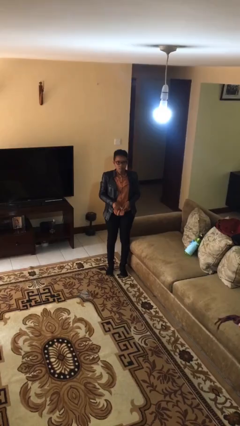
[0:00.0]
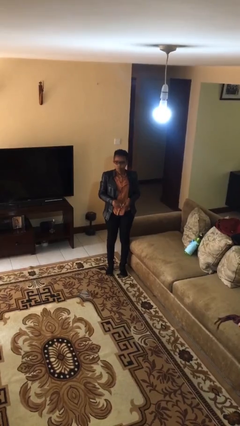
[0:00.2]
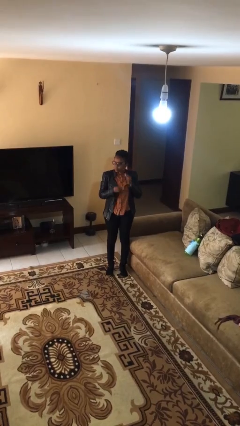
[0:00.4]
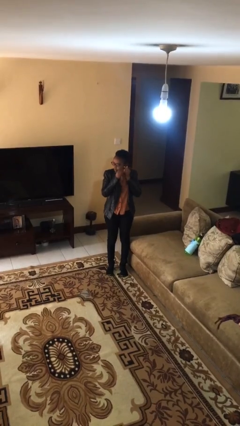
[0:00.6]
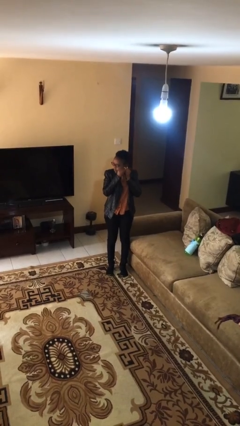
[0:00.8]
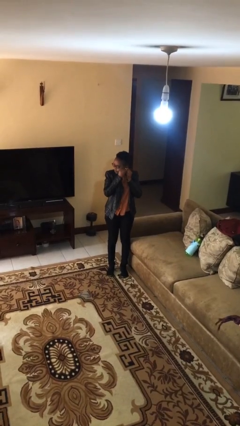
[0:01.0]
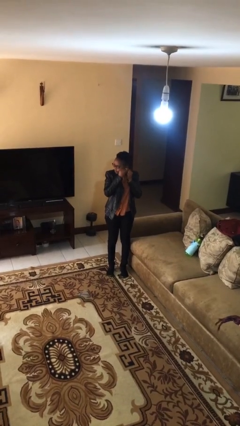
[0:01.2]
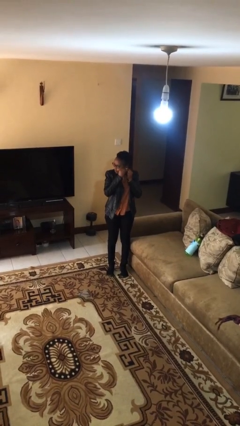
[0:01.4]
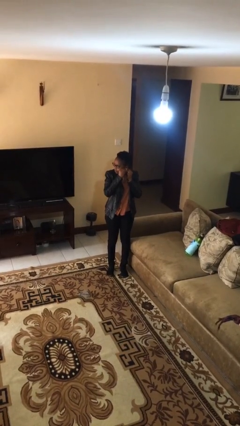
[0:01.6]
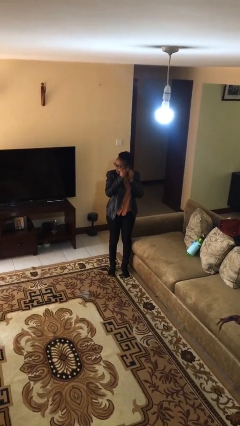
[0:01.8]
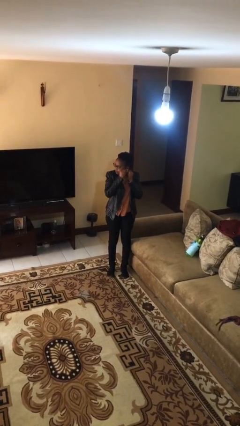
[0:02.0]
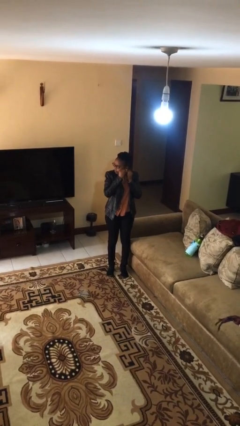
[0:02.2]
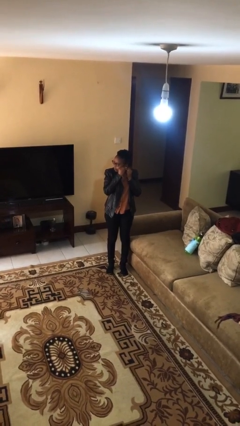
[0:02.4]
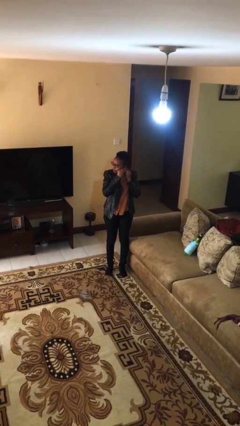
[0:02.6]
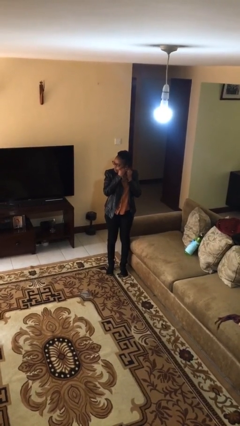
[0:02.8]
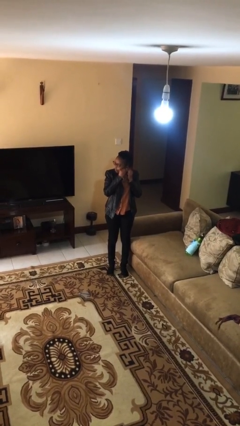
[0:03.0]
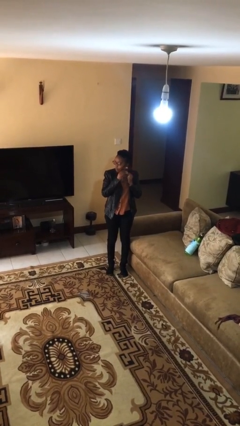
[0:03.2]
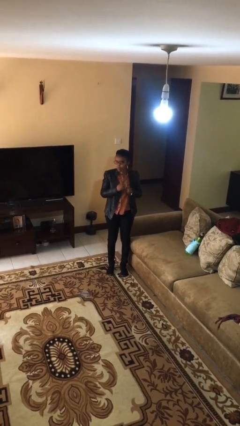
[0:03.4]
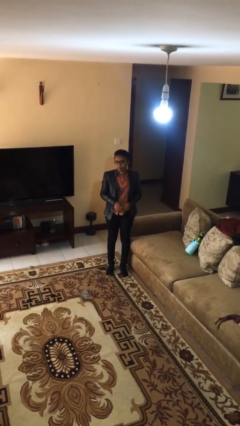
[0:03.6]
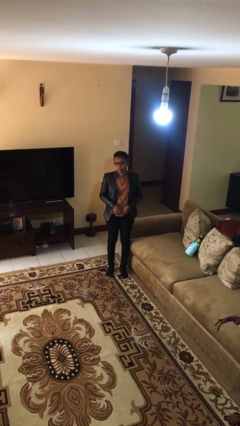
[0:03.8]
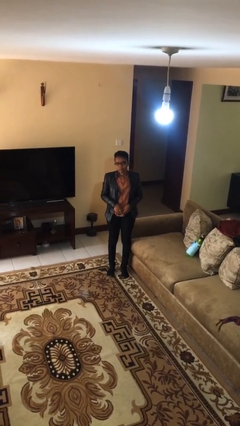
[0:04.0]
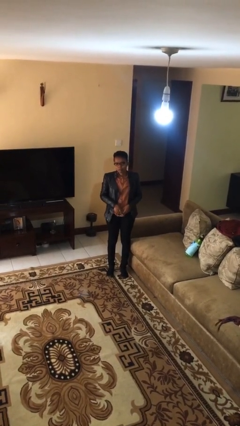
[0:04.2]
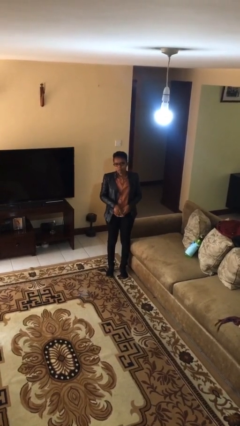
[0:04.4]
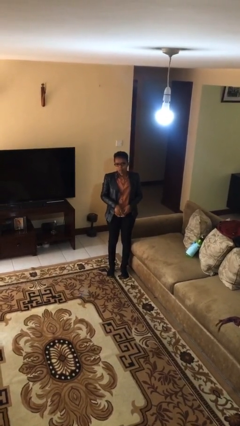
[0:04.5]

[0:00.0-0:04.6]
person puts on earrings

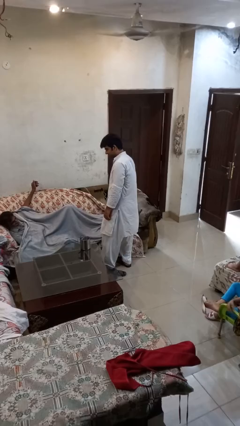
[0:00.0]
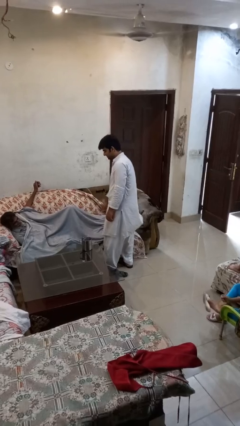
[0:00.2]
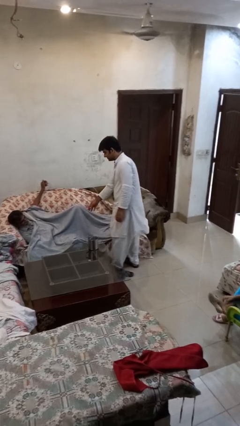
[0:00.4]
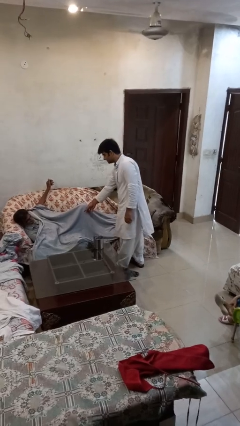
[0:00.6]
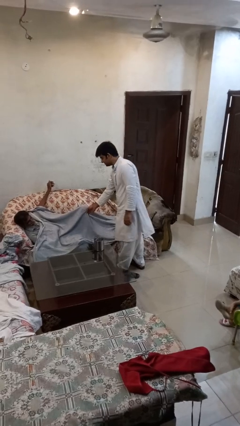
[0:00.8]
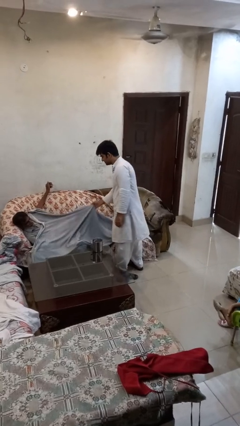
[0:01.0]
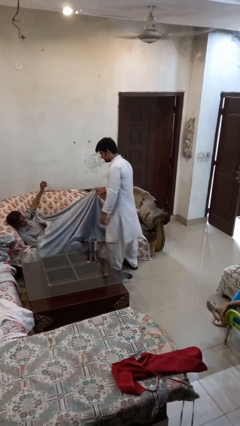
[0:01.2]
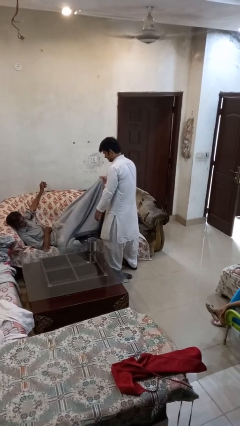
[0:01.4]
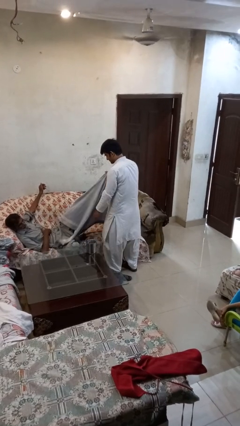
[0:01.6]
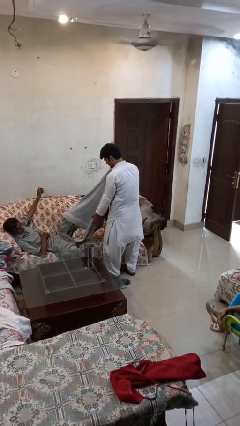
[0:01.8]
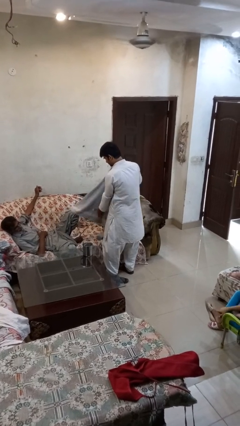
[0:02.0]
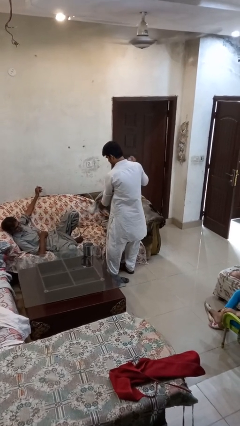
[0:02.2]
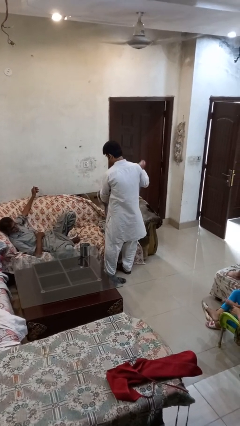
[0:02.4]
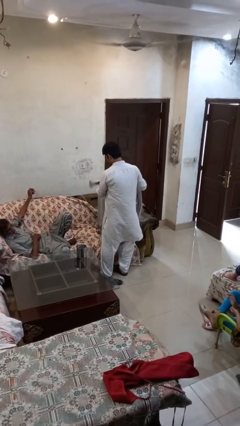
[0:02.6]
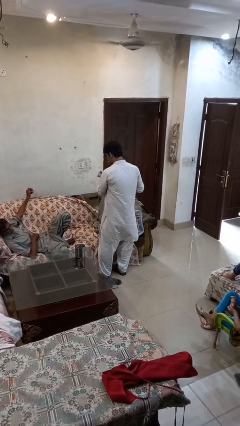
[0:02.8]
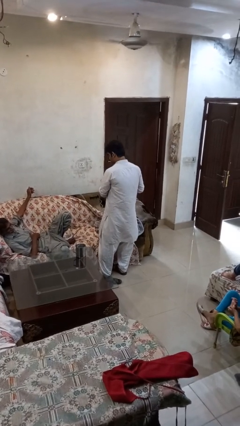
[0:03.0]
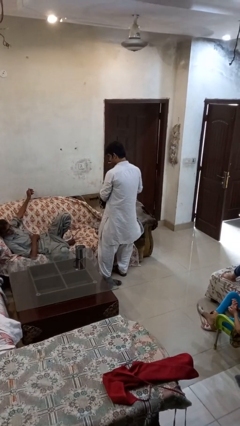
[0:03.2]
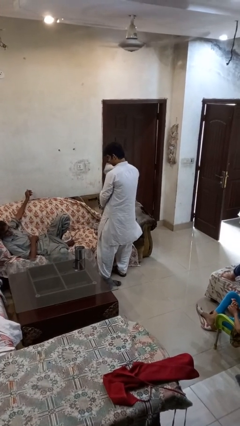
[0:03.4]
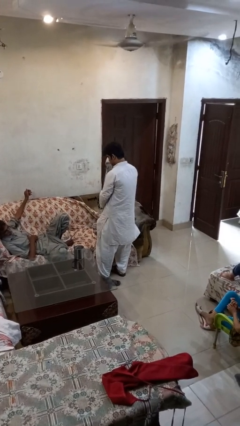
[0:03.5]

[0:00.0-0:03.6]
person uncovers friend with blanket

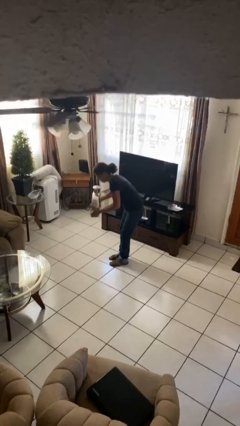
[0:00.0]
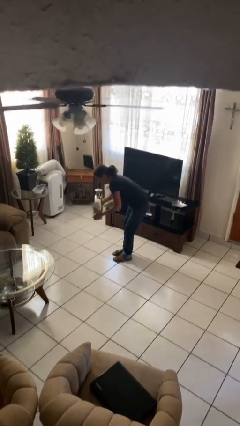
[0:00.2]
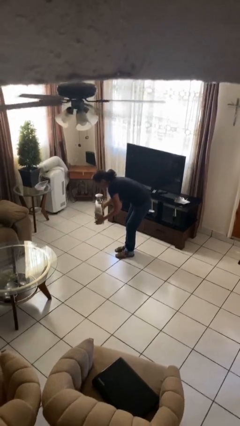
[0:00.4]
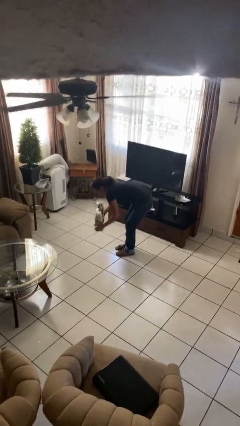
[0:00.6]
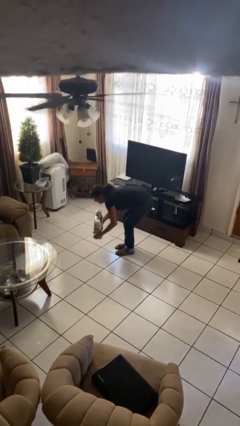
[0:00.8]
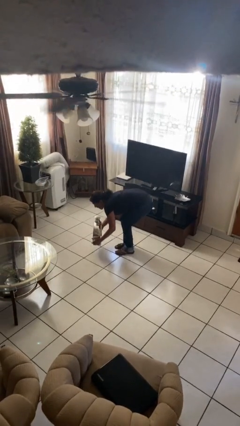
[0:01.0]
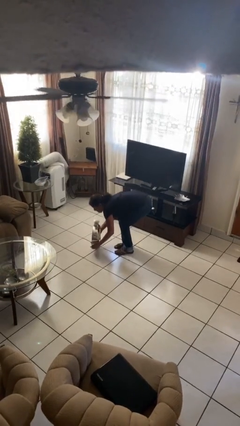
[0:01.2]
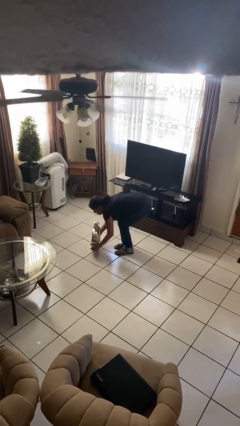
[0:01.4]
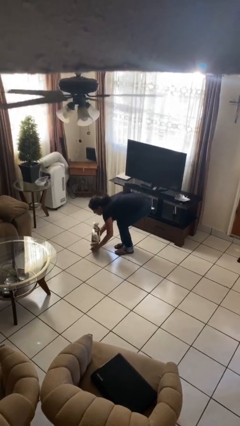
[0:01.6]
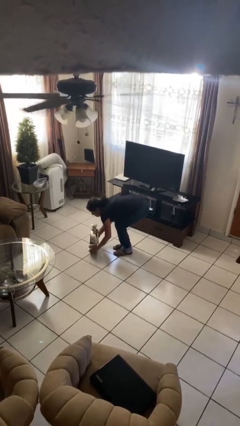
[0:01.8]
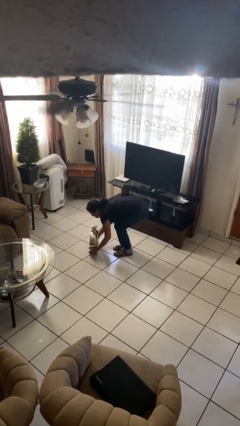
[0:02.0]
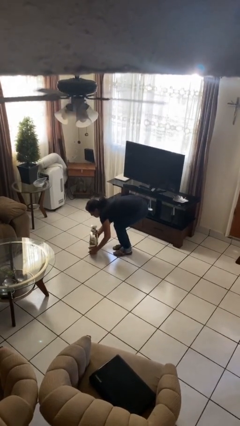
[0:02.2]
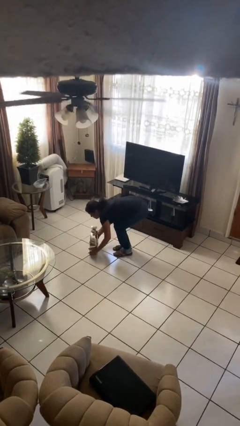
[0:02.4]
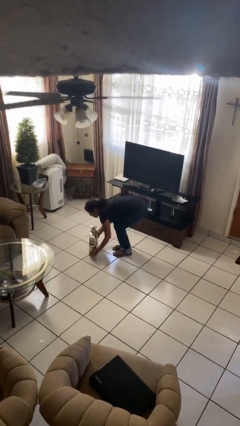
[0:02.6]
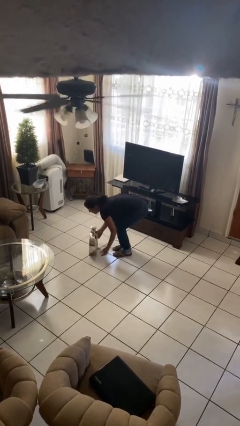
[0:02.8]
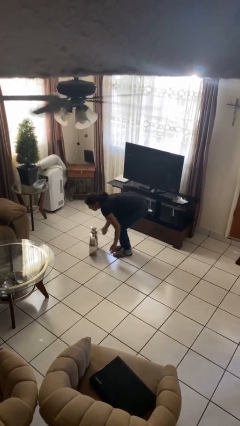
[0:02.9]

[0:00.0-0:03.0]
person puts down object on floor

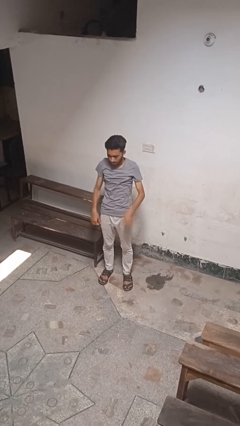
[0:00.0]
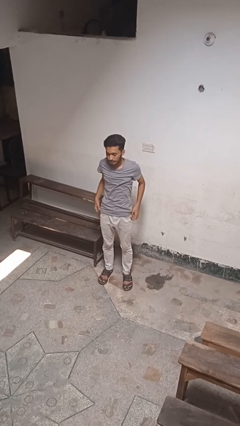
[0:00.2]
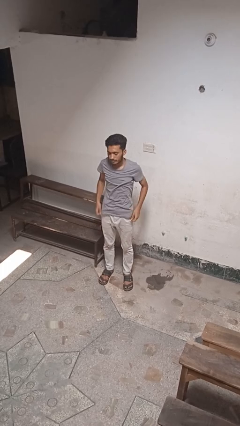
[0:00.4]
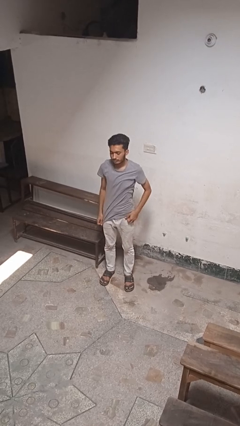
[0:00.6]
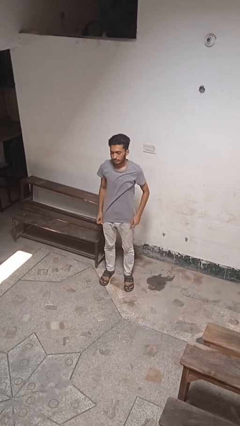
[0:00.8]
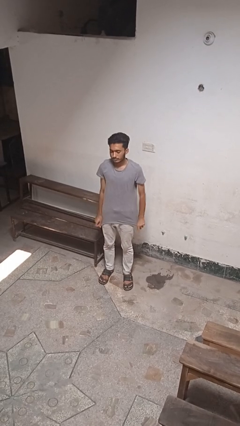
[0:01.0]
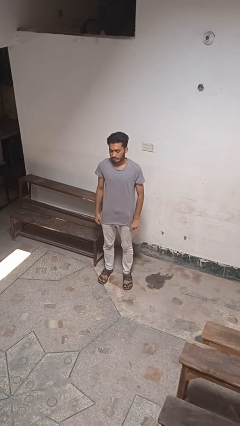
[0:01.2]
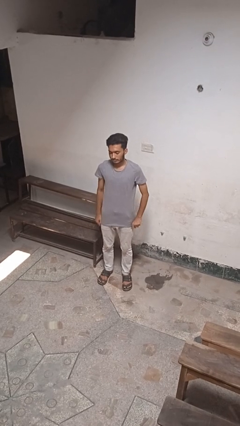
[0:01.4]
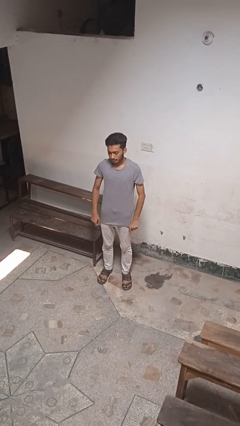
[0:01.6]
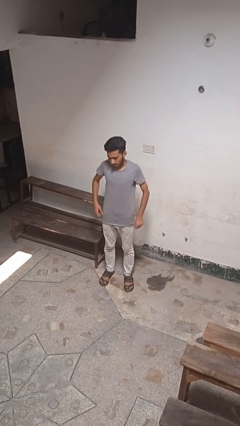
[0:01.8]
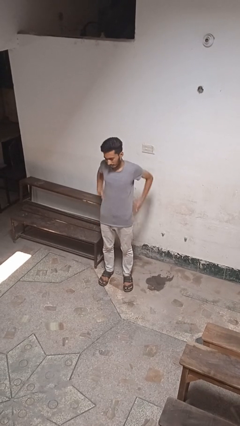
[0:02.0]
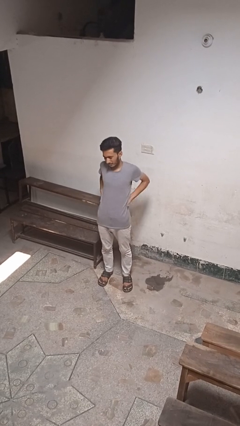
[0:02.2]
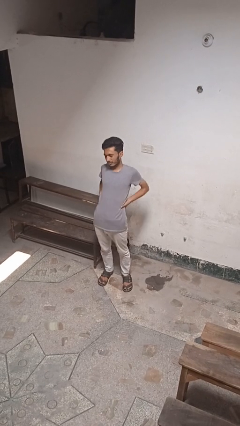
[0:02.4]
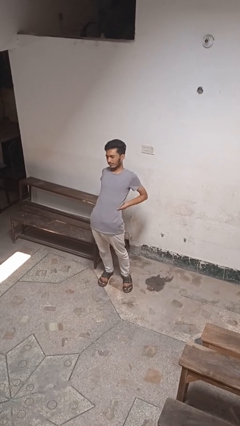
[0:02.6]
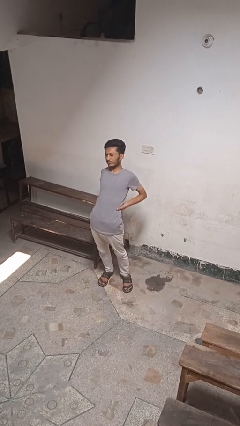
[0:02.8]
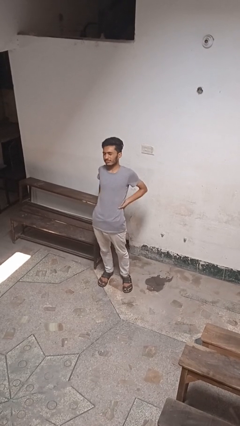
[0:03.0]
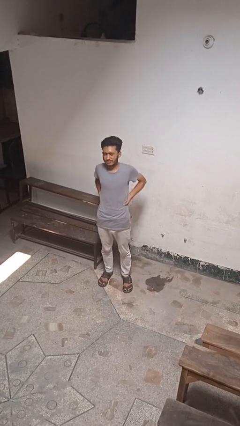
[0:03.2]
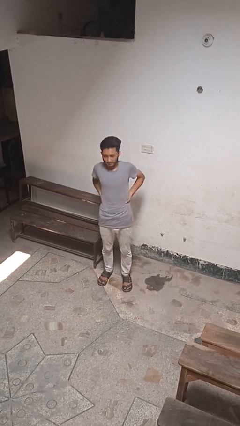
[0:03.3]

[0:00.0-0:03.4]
person puts feet up

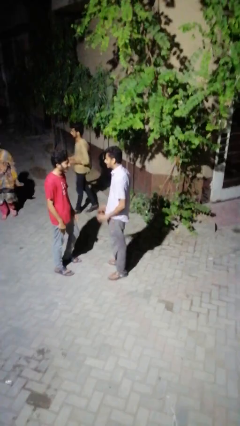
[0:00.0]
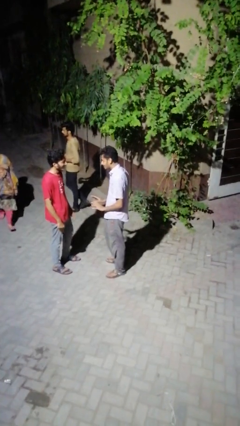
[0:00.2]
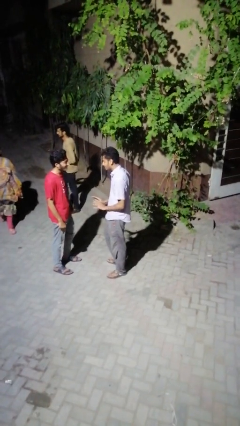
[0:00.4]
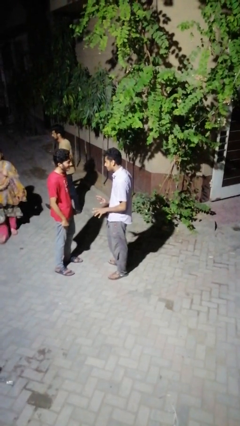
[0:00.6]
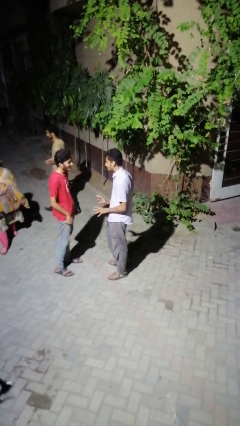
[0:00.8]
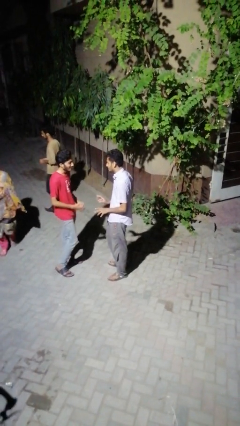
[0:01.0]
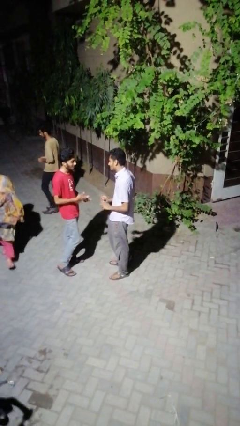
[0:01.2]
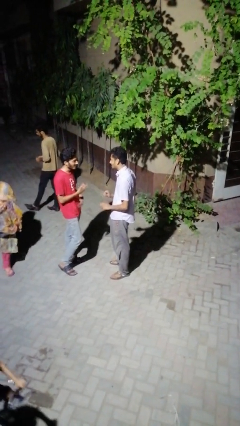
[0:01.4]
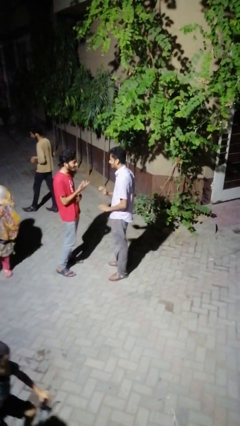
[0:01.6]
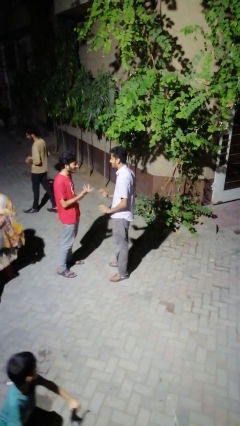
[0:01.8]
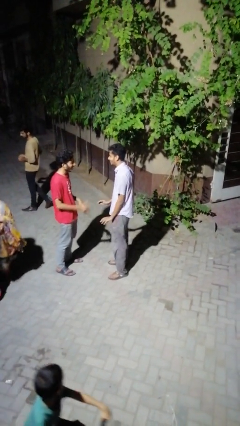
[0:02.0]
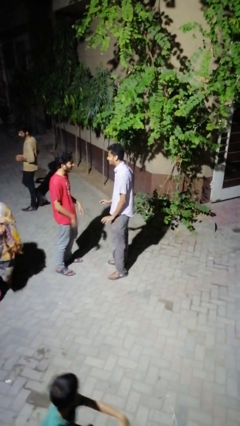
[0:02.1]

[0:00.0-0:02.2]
person talks to person

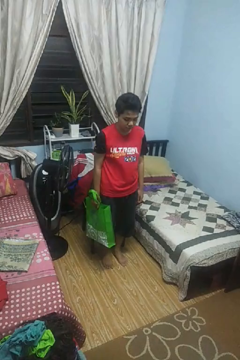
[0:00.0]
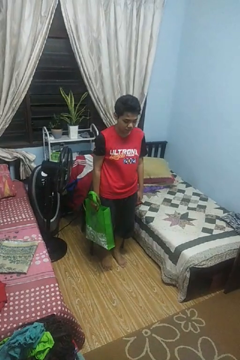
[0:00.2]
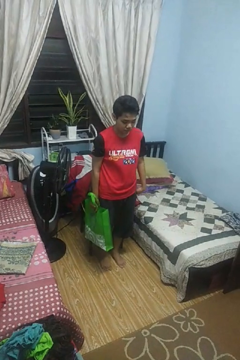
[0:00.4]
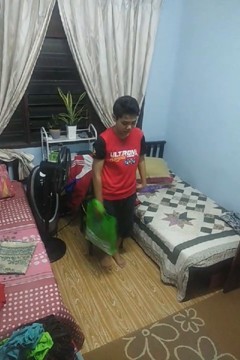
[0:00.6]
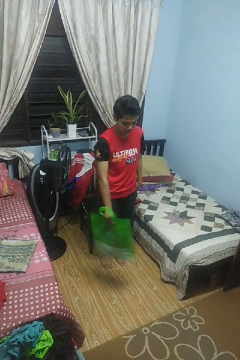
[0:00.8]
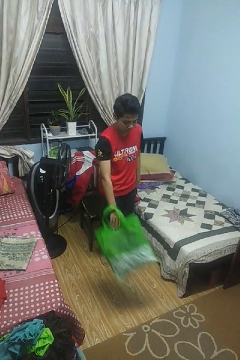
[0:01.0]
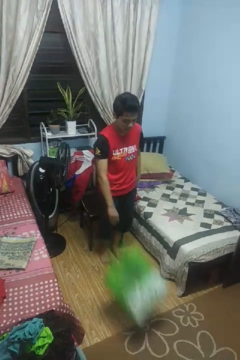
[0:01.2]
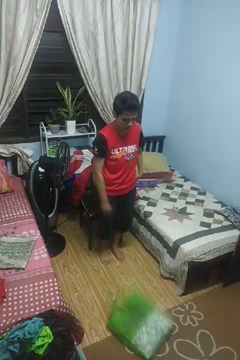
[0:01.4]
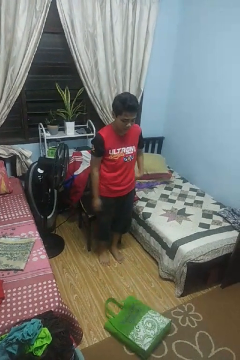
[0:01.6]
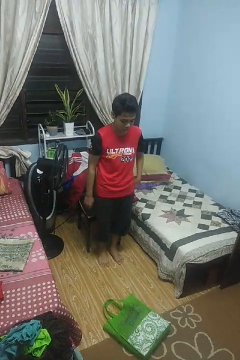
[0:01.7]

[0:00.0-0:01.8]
person throws object to ground
